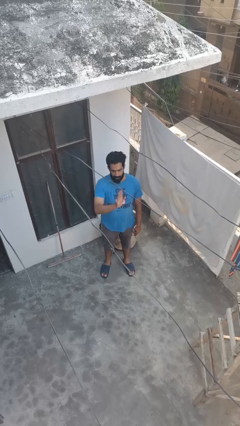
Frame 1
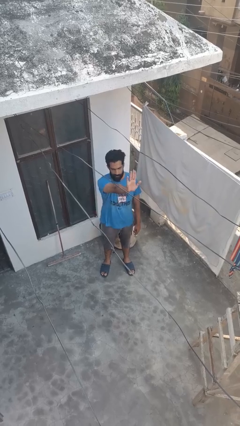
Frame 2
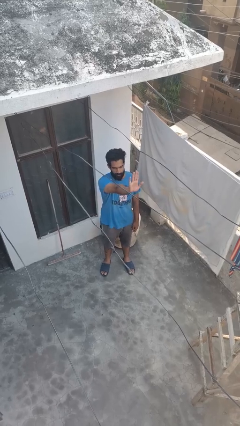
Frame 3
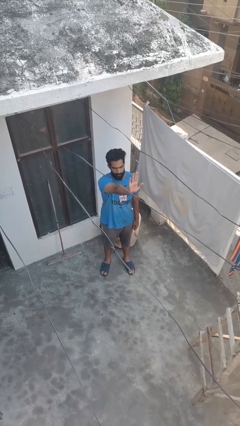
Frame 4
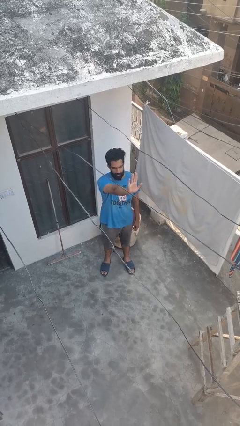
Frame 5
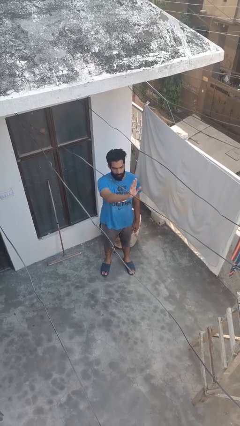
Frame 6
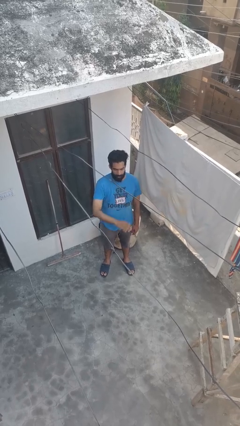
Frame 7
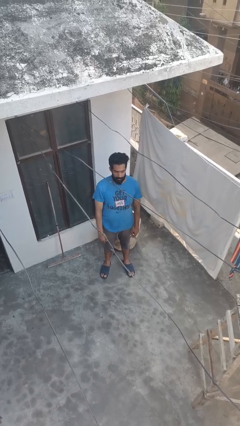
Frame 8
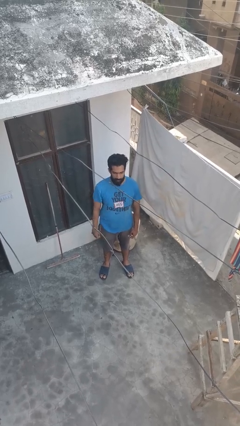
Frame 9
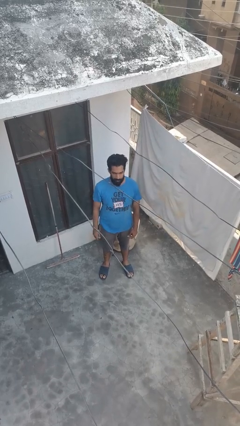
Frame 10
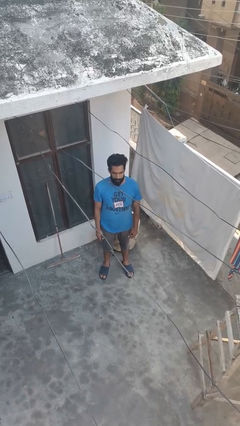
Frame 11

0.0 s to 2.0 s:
person gestures stop

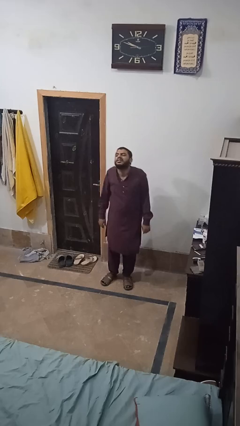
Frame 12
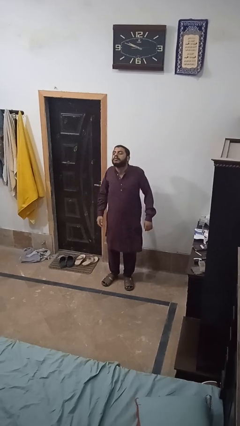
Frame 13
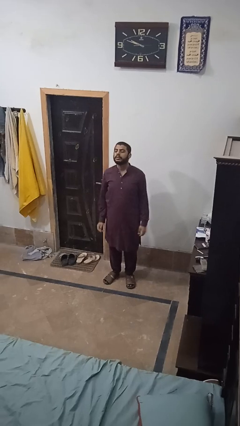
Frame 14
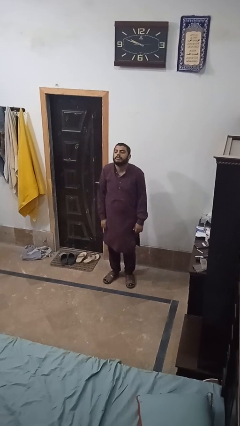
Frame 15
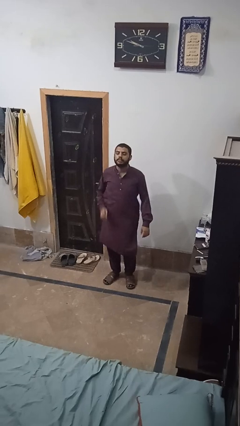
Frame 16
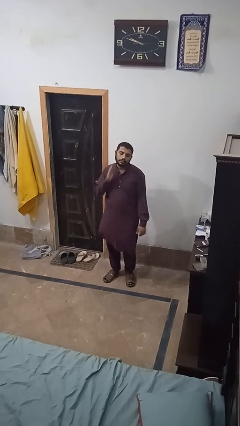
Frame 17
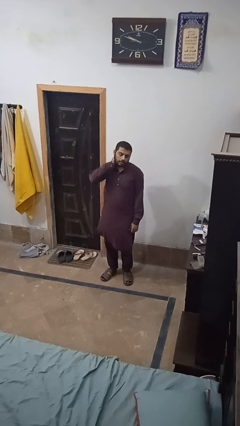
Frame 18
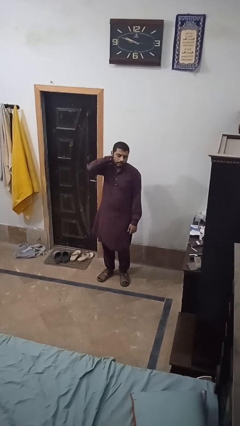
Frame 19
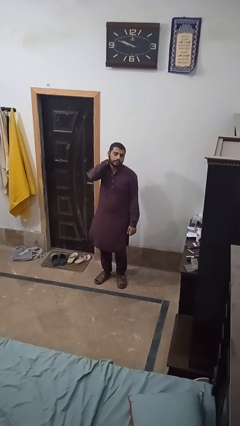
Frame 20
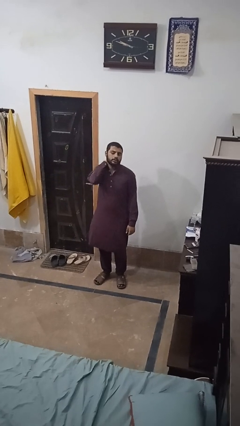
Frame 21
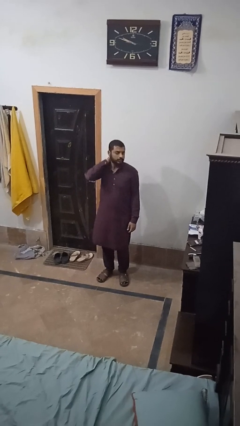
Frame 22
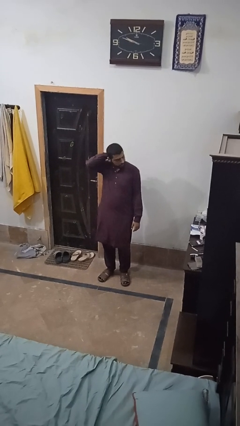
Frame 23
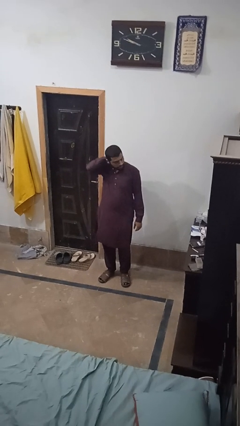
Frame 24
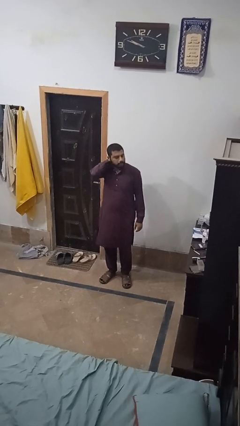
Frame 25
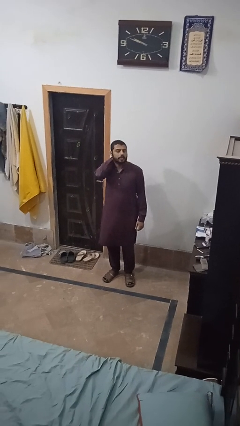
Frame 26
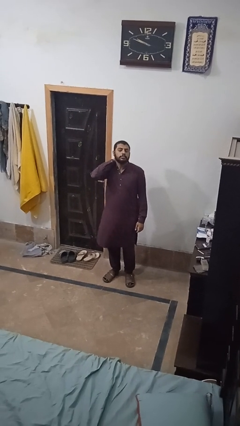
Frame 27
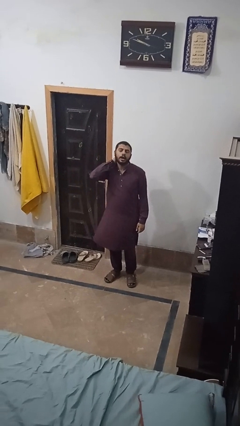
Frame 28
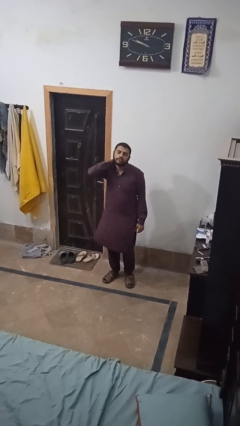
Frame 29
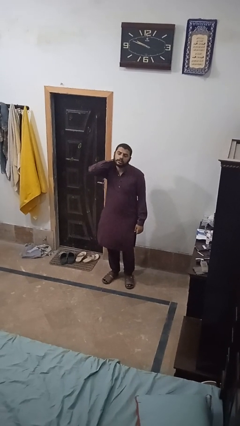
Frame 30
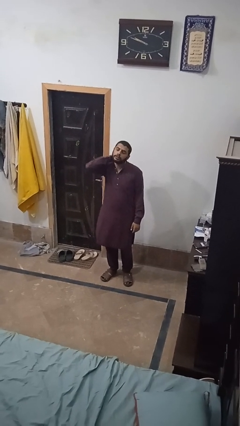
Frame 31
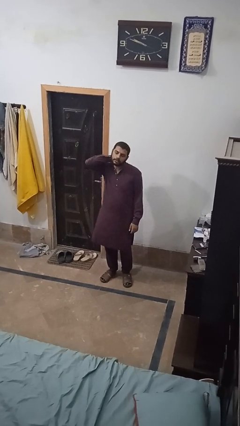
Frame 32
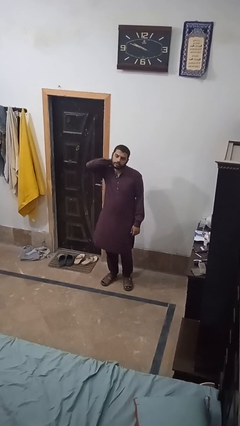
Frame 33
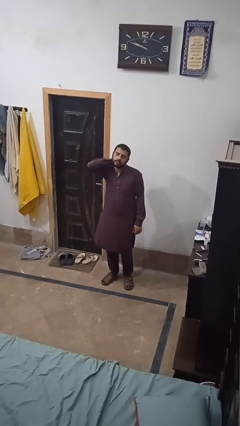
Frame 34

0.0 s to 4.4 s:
person rubs neck

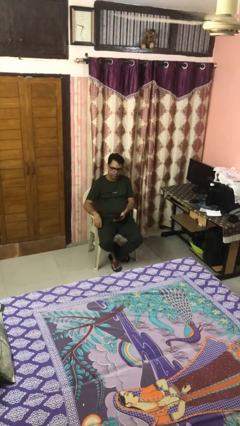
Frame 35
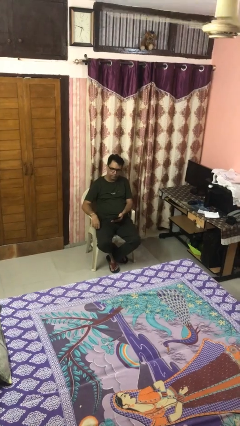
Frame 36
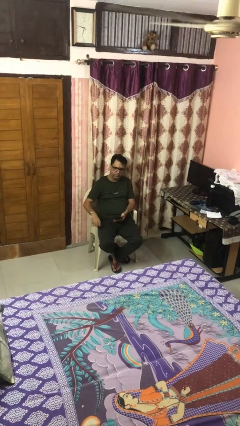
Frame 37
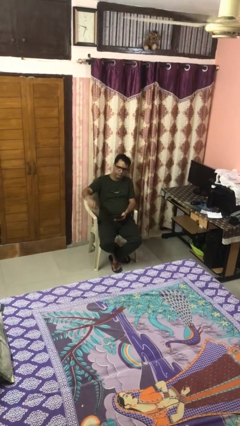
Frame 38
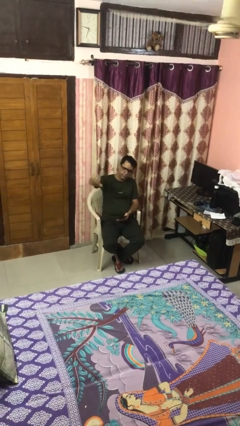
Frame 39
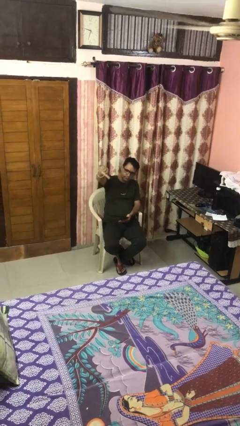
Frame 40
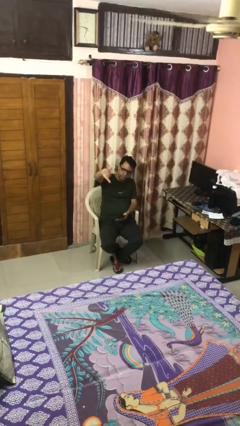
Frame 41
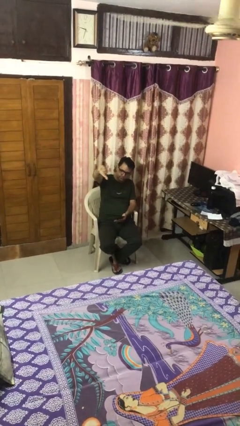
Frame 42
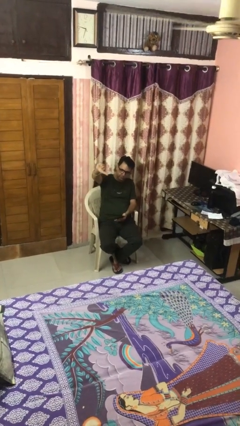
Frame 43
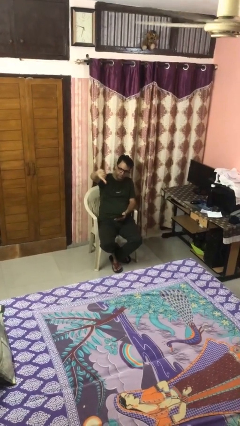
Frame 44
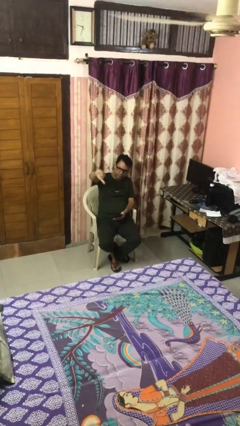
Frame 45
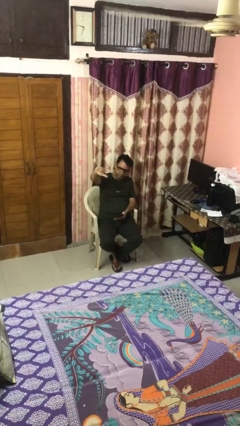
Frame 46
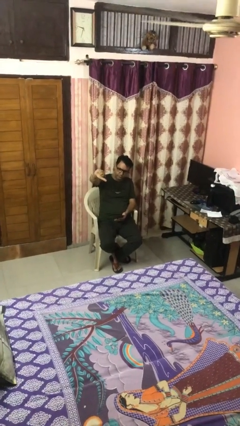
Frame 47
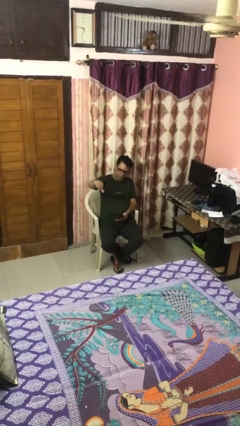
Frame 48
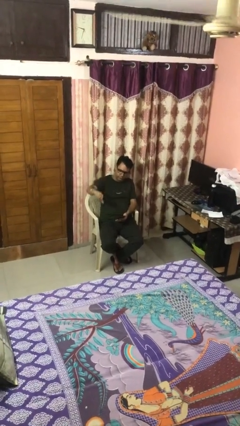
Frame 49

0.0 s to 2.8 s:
person gestures thumbs down

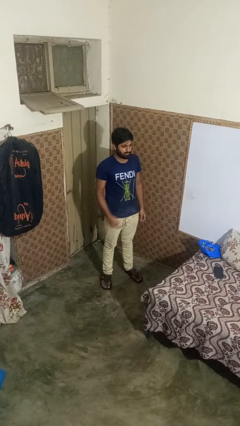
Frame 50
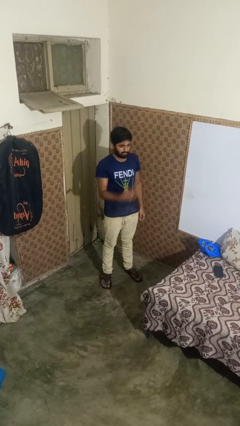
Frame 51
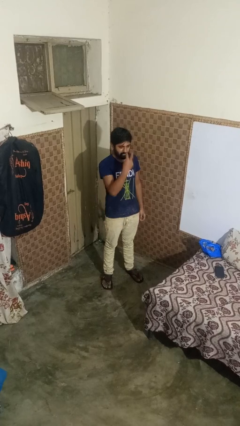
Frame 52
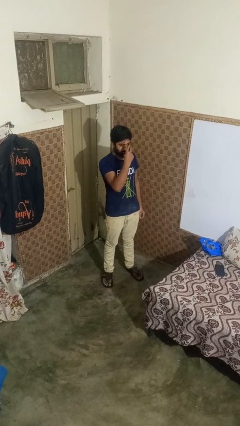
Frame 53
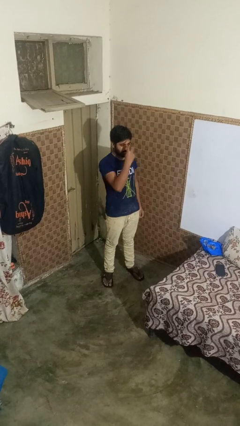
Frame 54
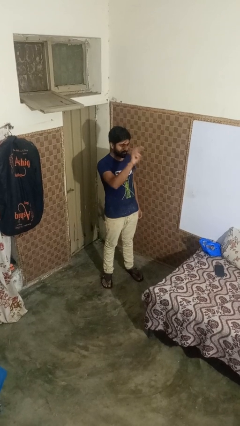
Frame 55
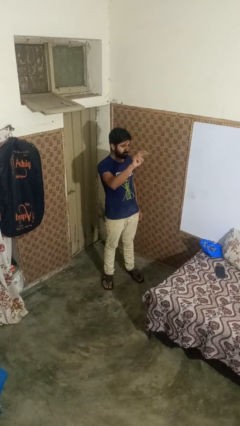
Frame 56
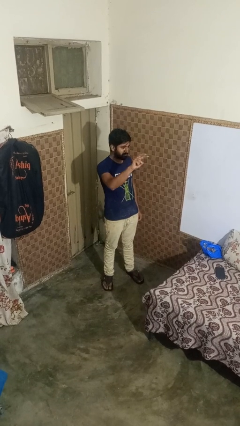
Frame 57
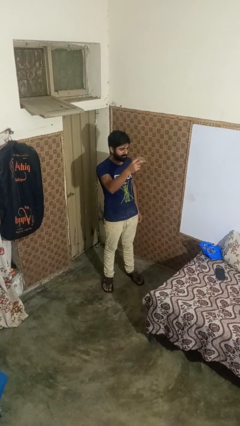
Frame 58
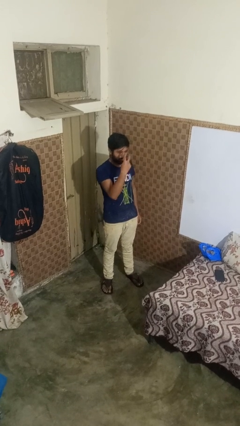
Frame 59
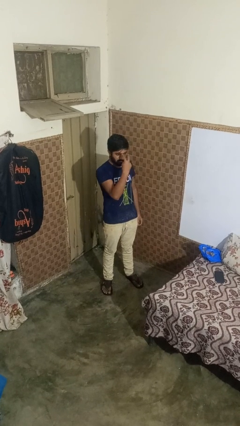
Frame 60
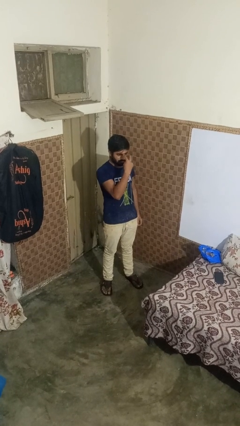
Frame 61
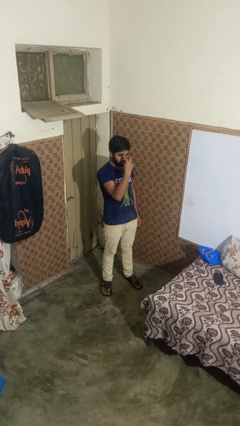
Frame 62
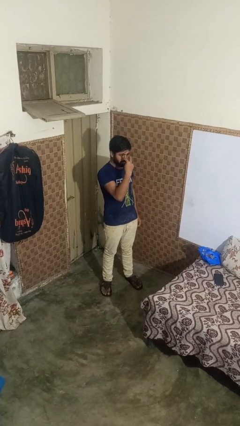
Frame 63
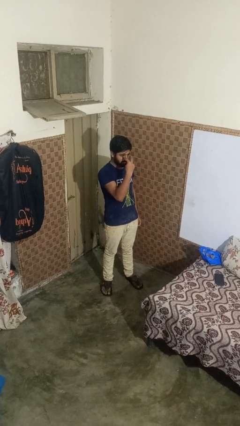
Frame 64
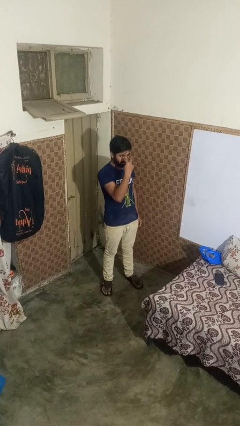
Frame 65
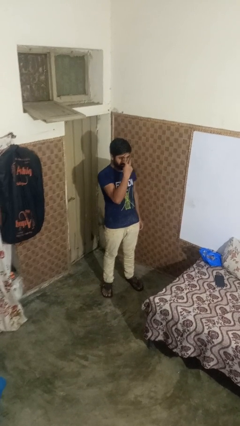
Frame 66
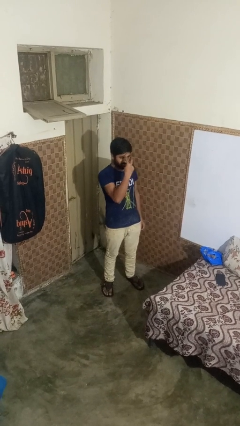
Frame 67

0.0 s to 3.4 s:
person gestures watch closely

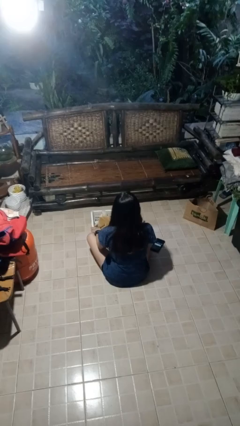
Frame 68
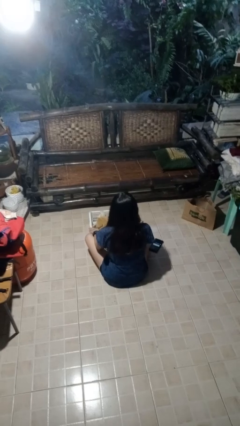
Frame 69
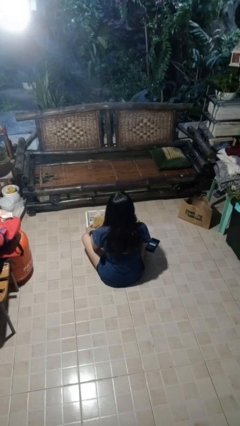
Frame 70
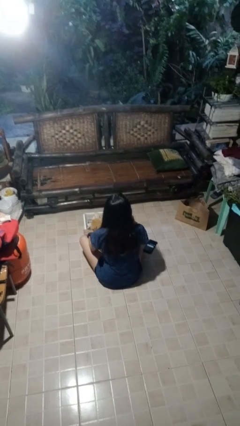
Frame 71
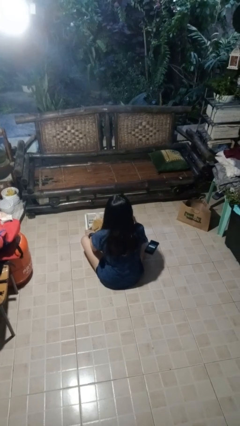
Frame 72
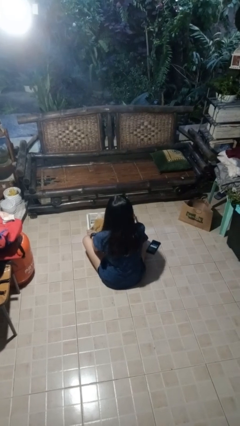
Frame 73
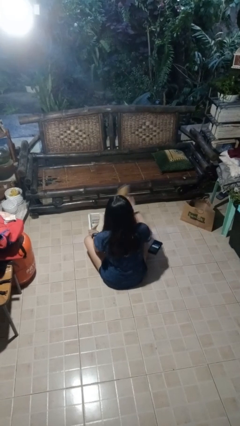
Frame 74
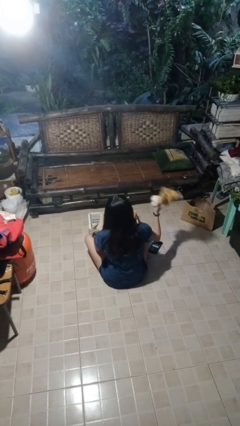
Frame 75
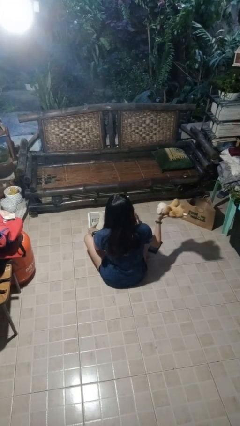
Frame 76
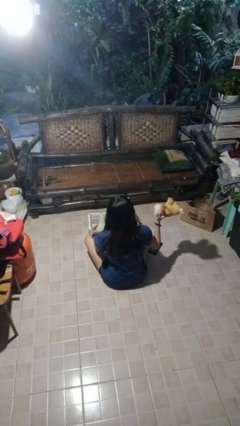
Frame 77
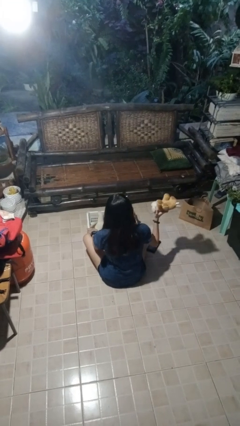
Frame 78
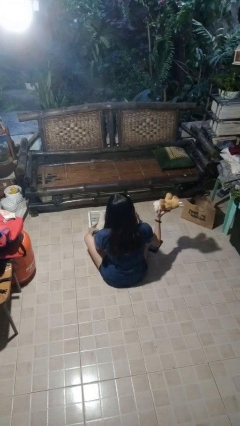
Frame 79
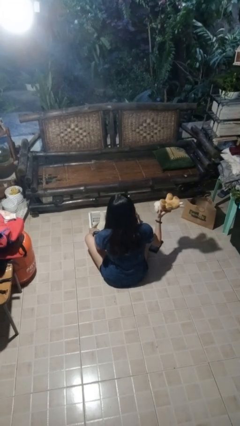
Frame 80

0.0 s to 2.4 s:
person takes object from basket

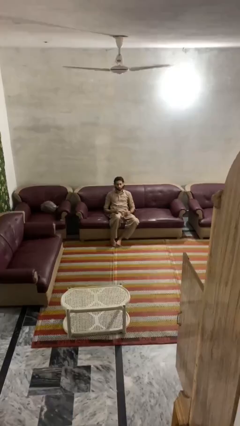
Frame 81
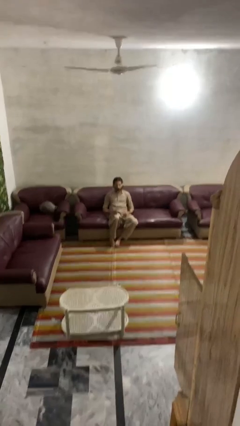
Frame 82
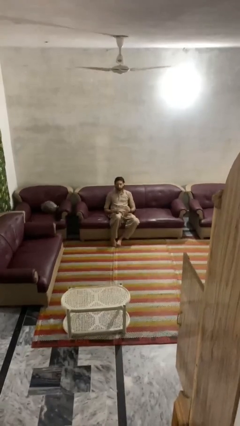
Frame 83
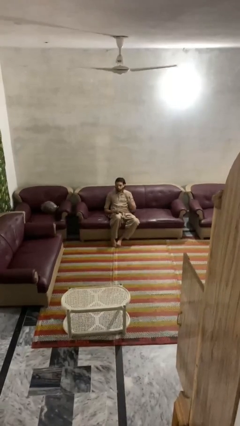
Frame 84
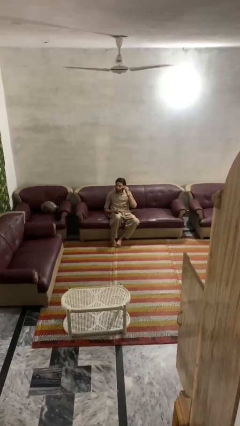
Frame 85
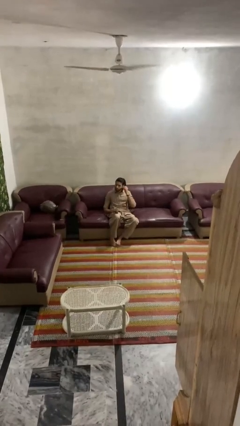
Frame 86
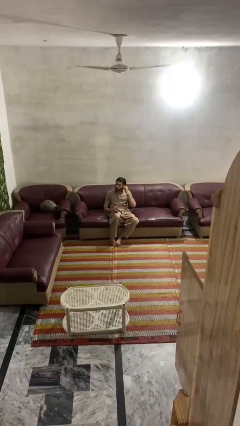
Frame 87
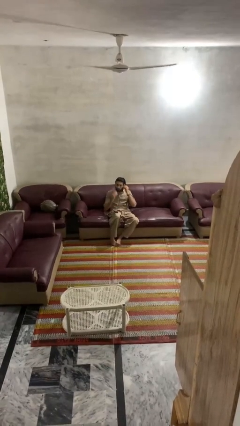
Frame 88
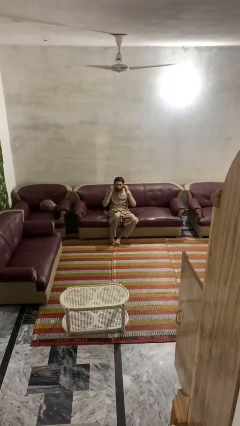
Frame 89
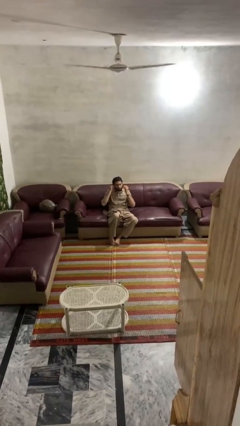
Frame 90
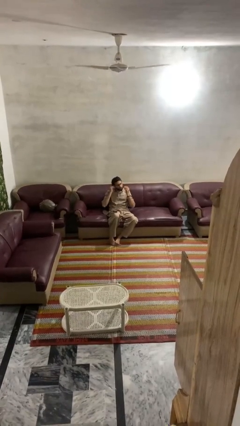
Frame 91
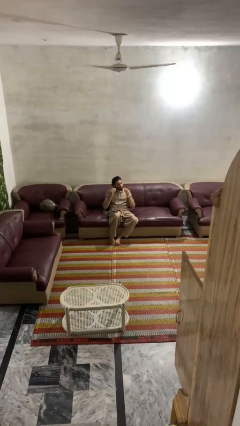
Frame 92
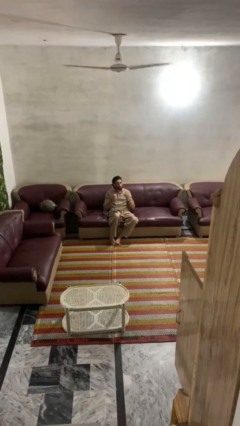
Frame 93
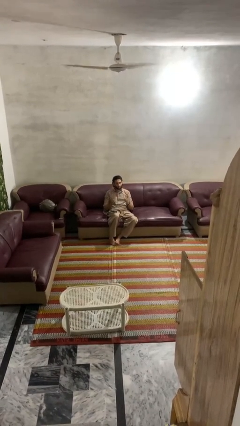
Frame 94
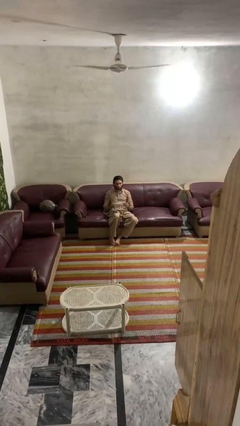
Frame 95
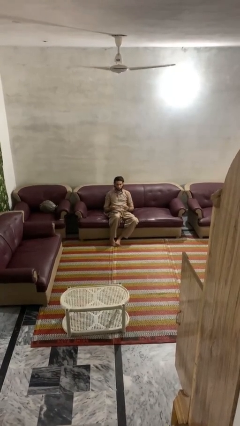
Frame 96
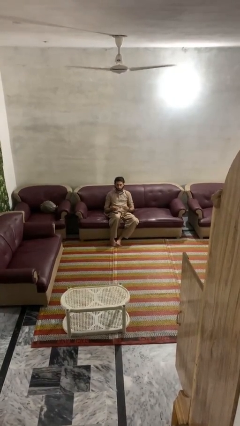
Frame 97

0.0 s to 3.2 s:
person takes off headphones
